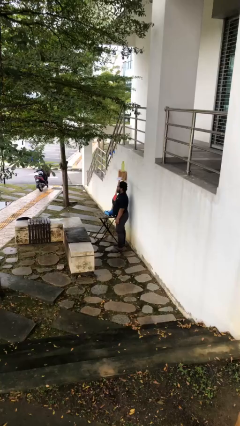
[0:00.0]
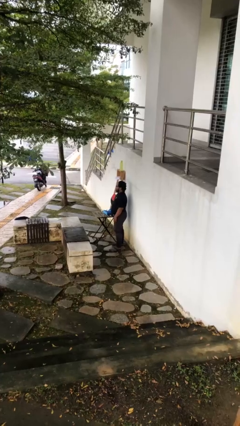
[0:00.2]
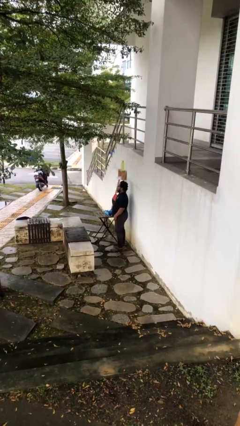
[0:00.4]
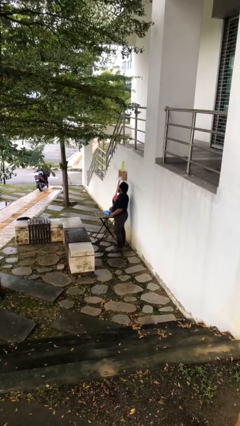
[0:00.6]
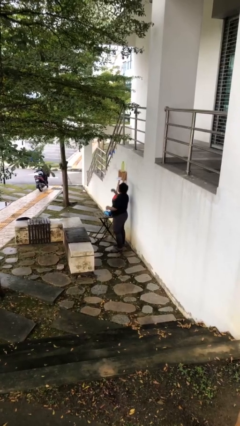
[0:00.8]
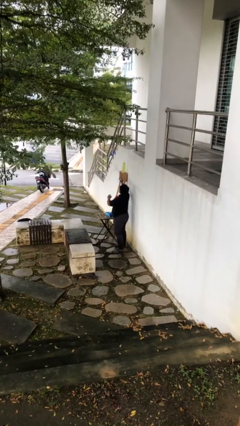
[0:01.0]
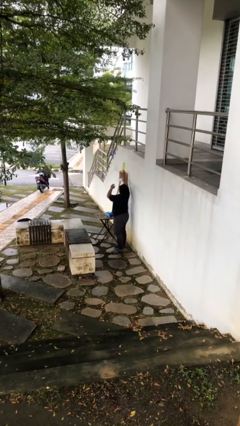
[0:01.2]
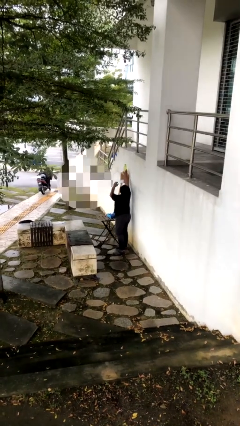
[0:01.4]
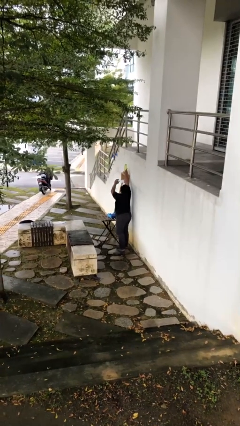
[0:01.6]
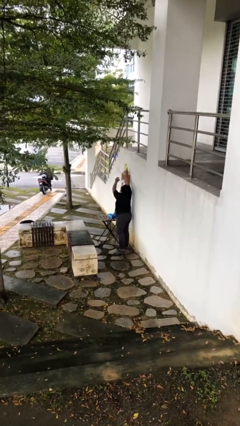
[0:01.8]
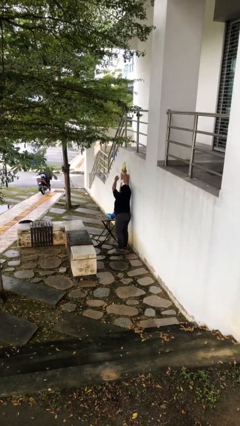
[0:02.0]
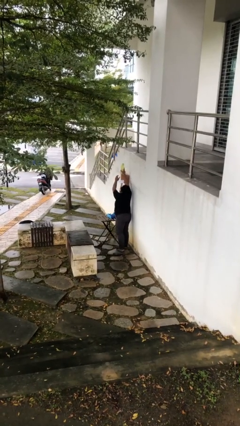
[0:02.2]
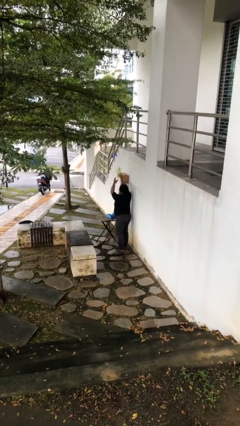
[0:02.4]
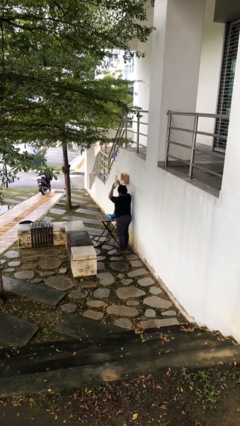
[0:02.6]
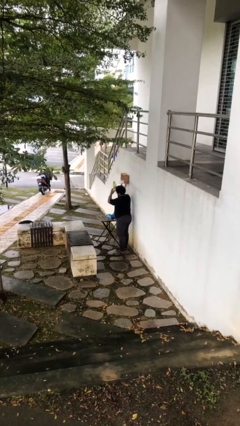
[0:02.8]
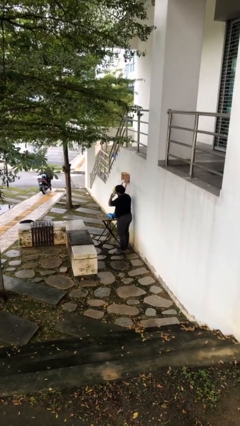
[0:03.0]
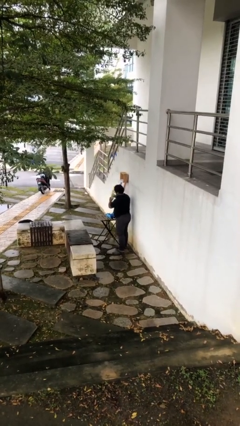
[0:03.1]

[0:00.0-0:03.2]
person picks up object from shelf

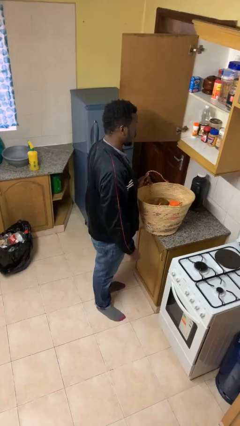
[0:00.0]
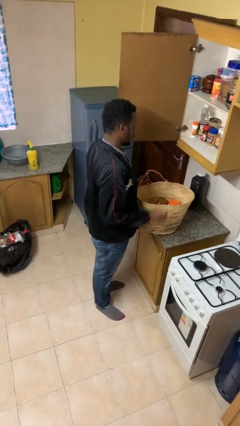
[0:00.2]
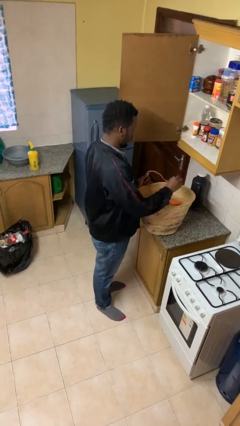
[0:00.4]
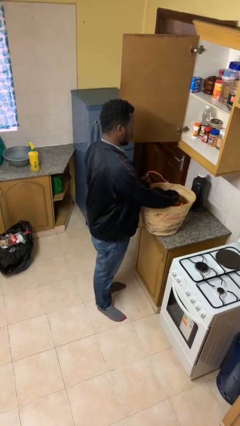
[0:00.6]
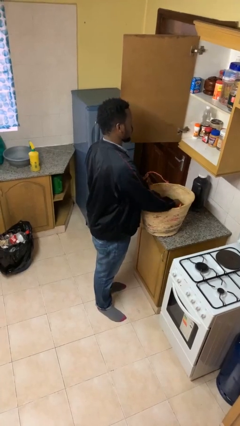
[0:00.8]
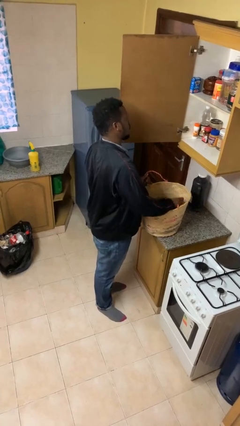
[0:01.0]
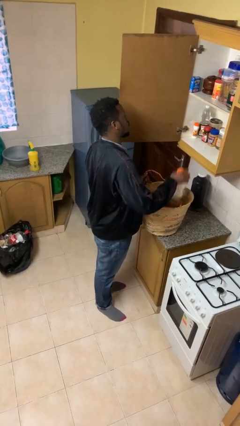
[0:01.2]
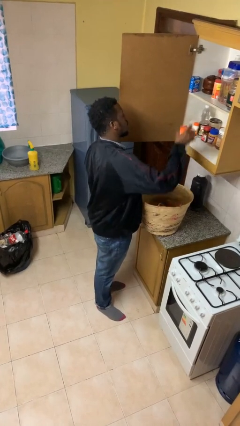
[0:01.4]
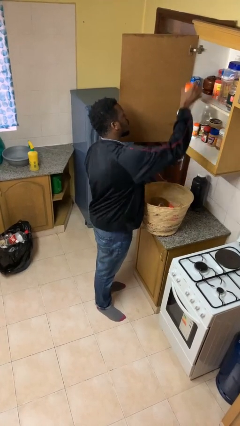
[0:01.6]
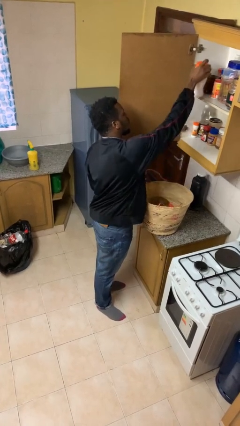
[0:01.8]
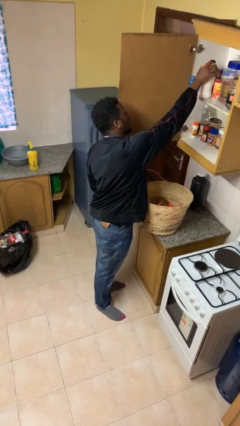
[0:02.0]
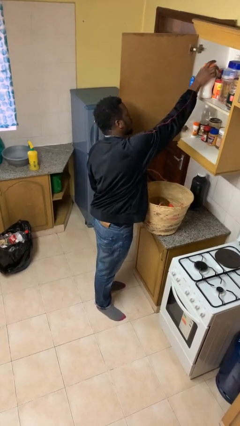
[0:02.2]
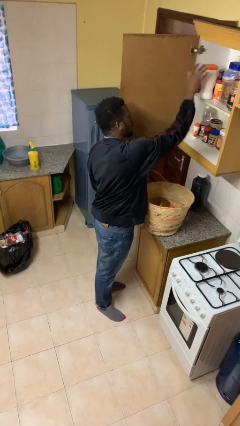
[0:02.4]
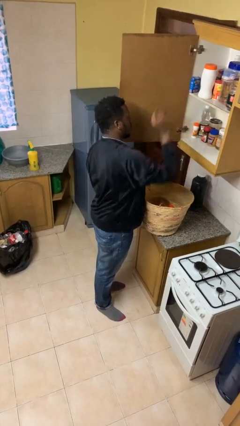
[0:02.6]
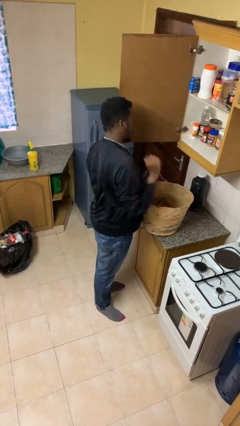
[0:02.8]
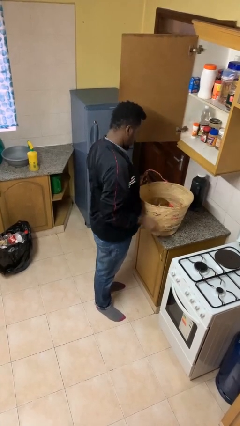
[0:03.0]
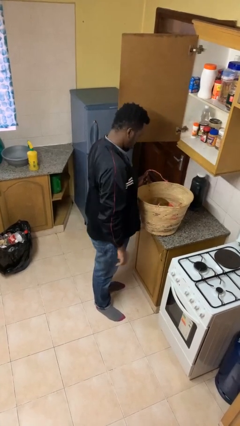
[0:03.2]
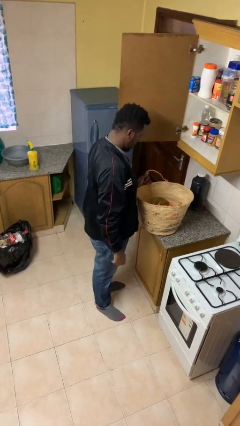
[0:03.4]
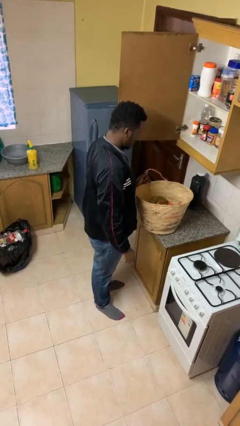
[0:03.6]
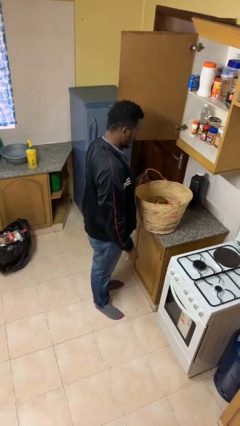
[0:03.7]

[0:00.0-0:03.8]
person loads groceries into cabinet

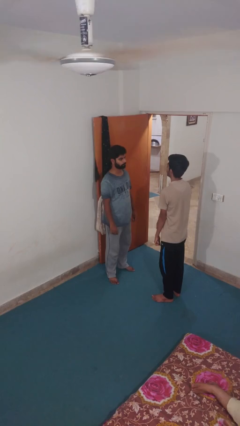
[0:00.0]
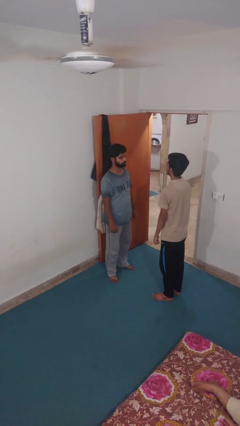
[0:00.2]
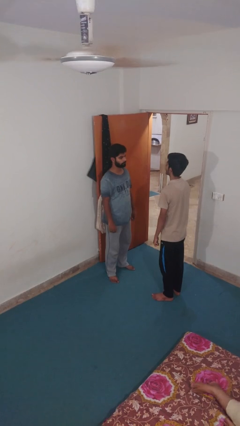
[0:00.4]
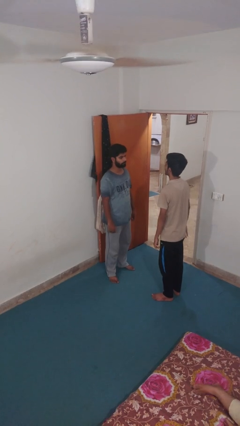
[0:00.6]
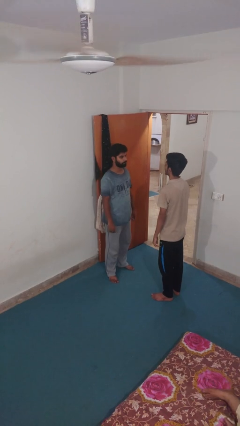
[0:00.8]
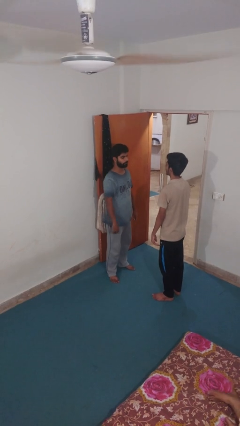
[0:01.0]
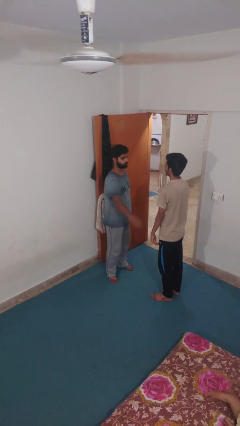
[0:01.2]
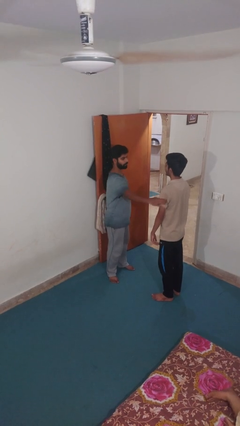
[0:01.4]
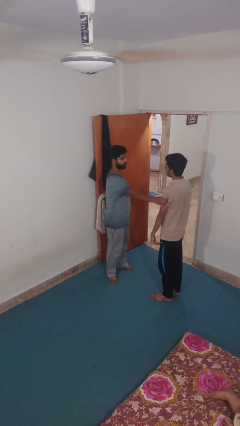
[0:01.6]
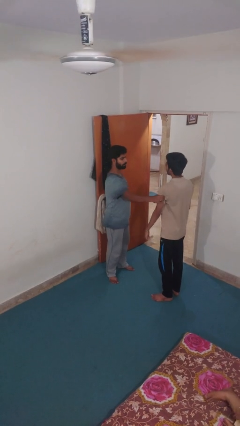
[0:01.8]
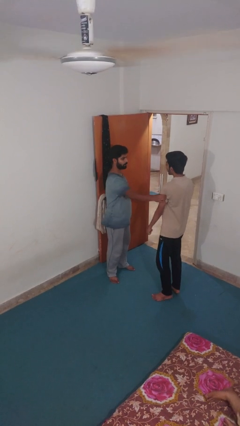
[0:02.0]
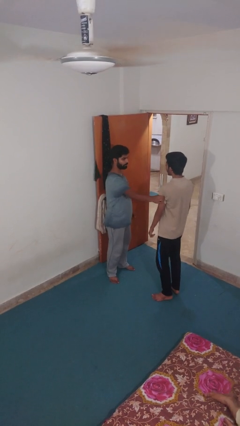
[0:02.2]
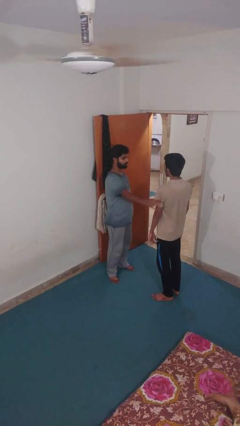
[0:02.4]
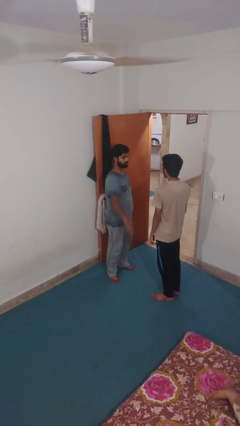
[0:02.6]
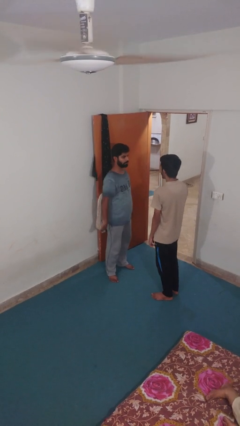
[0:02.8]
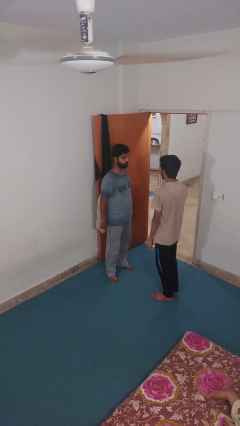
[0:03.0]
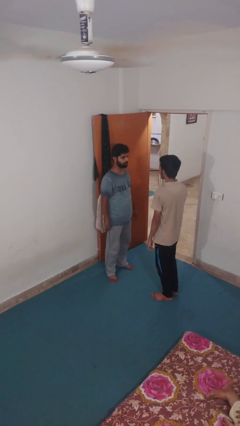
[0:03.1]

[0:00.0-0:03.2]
person grabs person by bicep

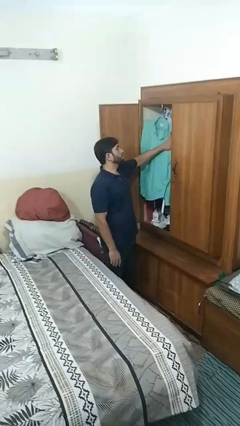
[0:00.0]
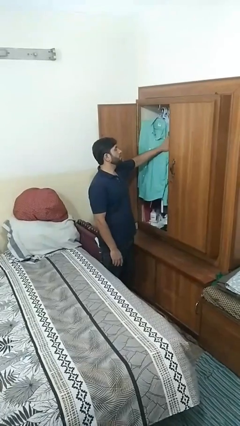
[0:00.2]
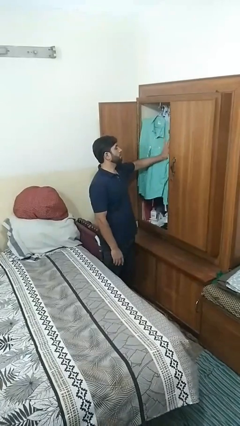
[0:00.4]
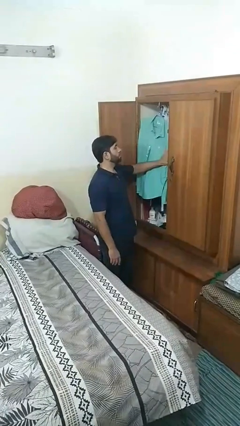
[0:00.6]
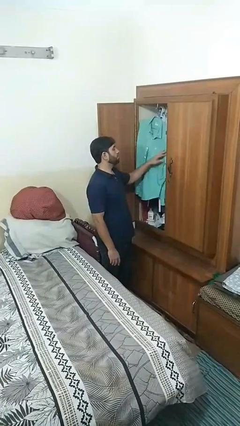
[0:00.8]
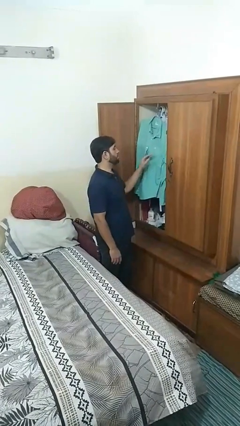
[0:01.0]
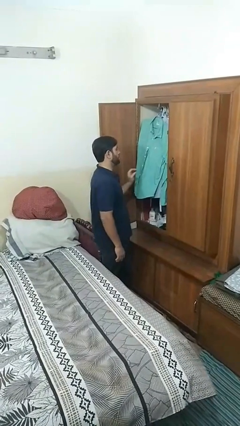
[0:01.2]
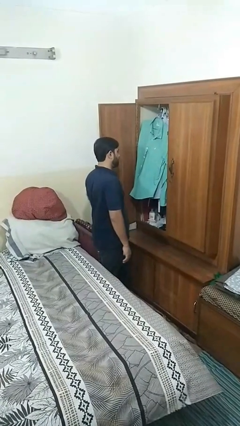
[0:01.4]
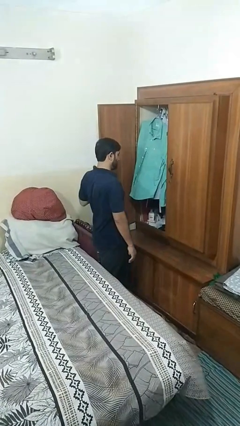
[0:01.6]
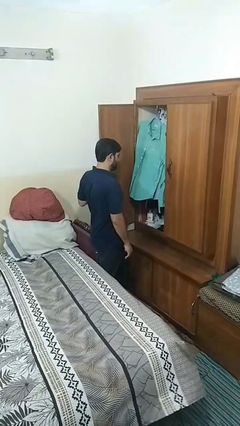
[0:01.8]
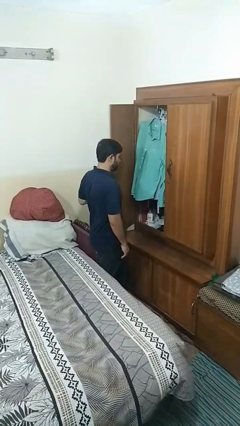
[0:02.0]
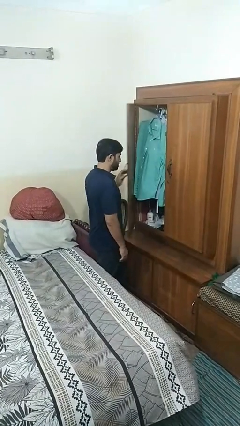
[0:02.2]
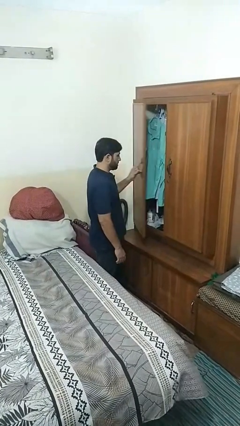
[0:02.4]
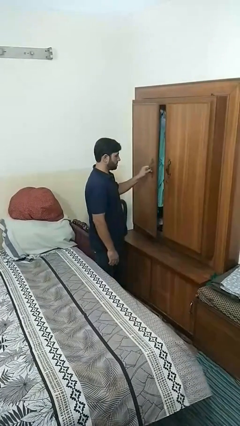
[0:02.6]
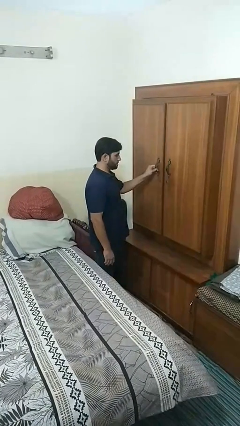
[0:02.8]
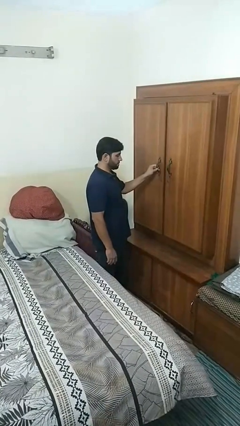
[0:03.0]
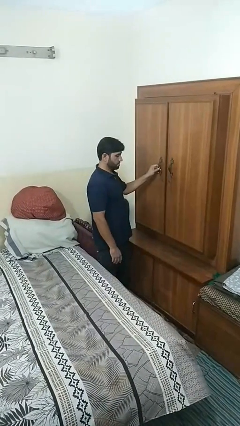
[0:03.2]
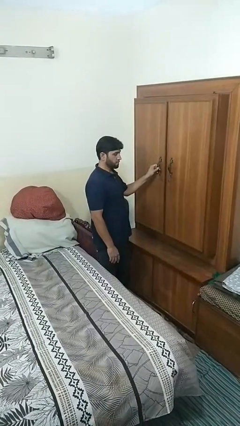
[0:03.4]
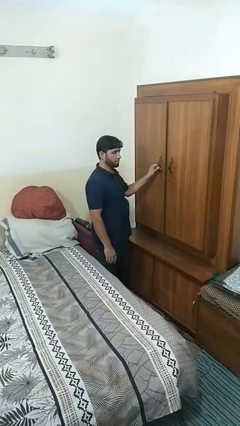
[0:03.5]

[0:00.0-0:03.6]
person closes closet door

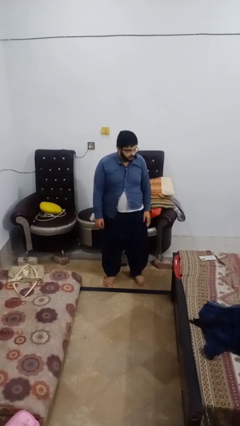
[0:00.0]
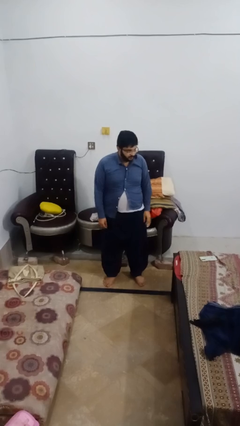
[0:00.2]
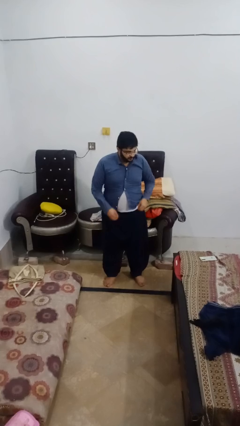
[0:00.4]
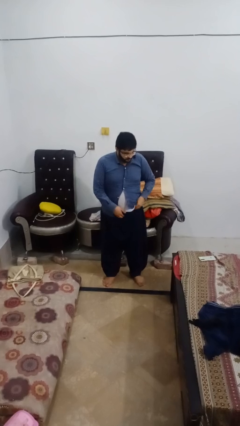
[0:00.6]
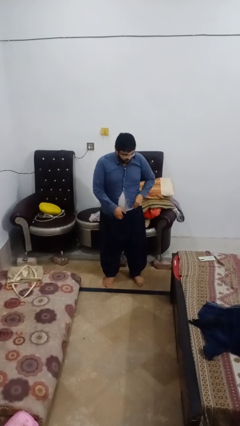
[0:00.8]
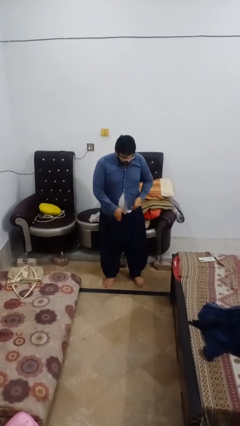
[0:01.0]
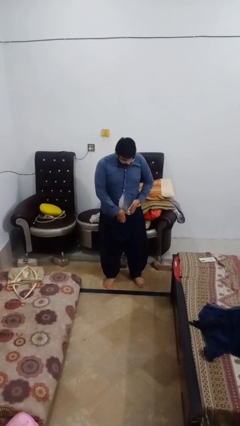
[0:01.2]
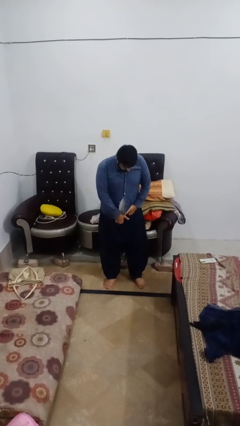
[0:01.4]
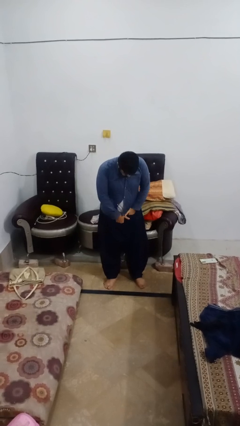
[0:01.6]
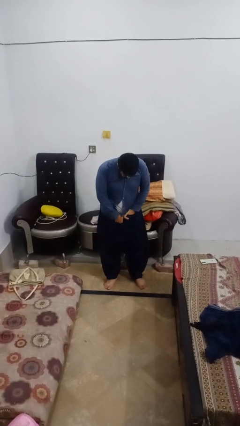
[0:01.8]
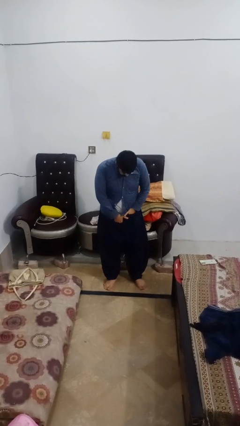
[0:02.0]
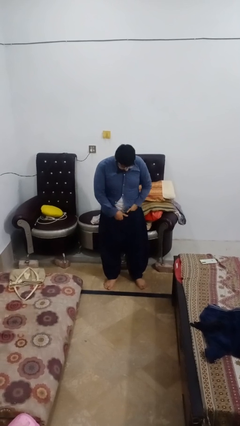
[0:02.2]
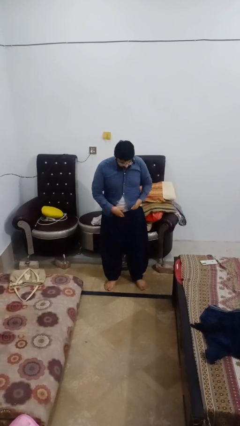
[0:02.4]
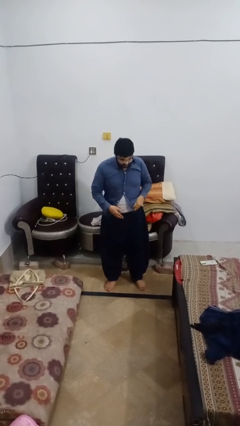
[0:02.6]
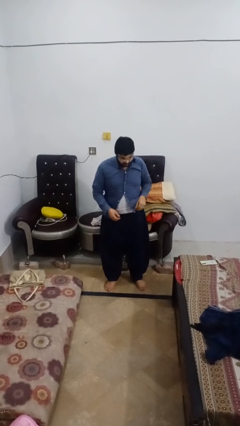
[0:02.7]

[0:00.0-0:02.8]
person puts hands in back pockets

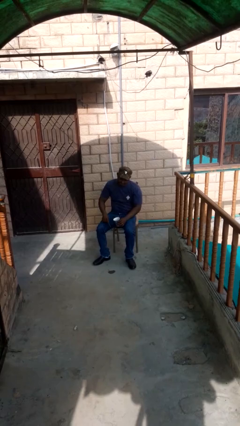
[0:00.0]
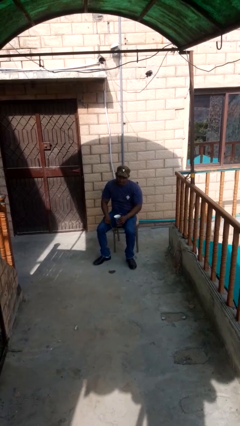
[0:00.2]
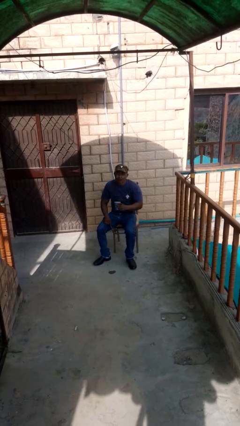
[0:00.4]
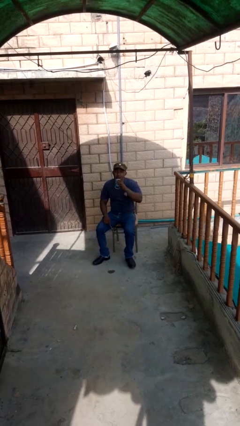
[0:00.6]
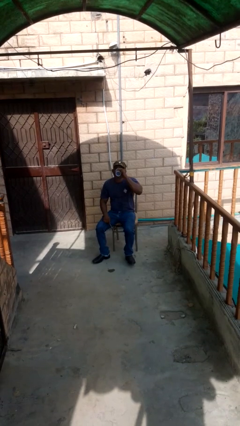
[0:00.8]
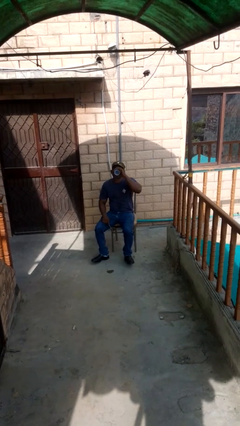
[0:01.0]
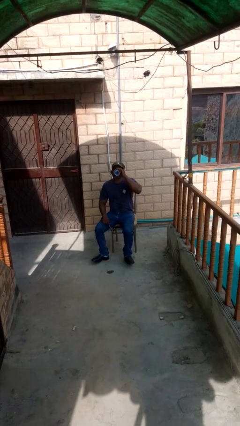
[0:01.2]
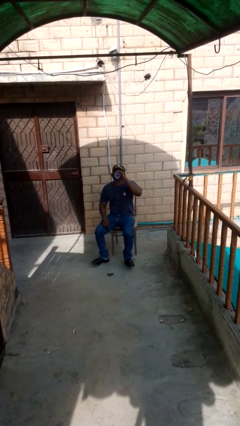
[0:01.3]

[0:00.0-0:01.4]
person drinks from mug
